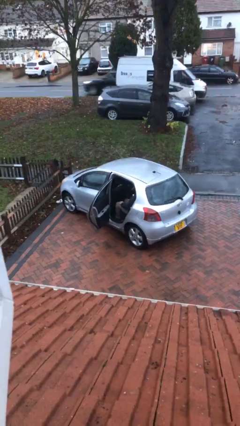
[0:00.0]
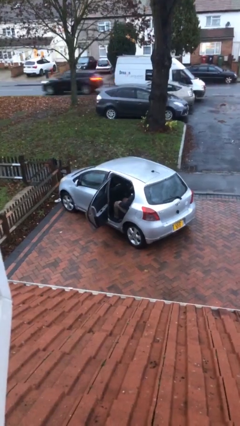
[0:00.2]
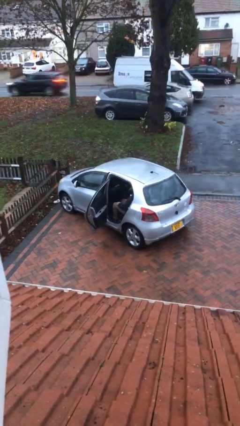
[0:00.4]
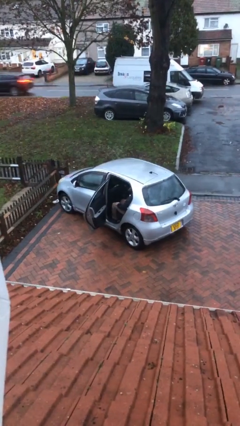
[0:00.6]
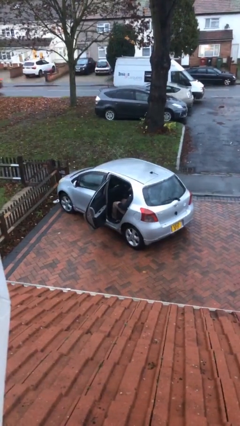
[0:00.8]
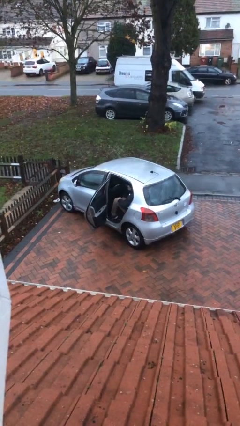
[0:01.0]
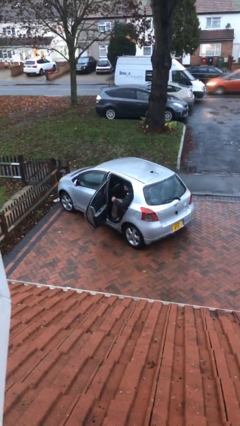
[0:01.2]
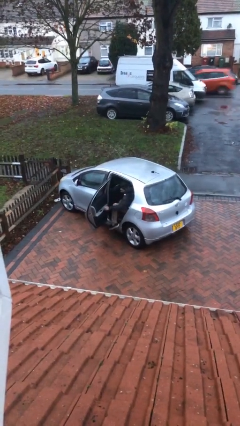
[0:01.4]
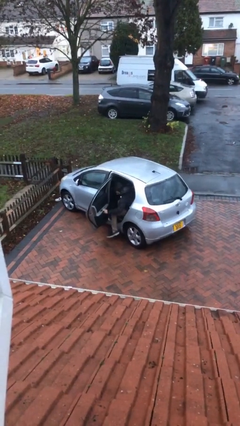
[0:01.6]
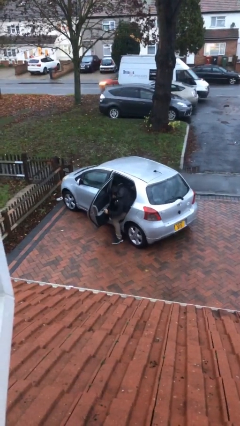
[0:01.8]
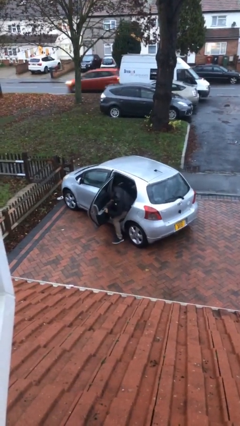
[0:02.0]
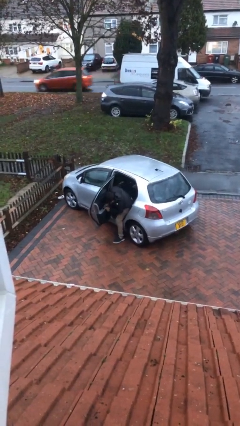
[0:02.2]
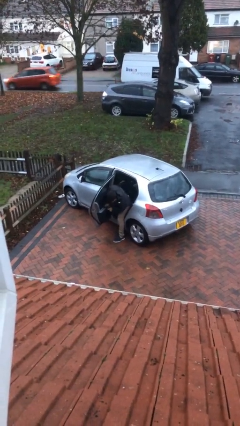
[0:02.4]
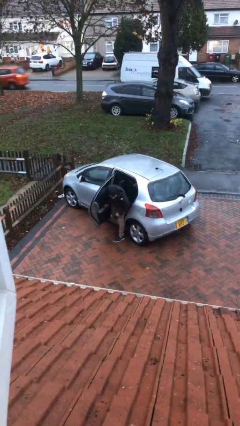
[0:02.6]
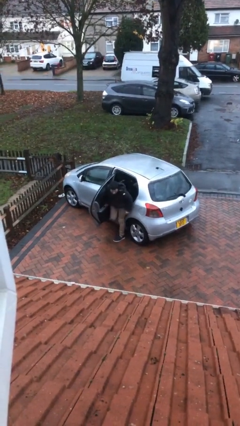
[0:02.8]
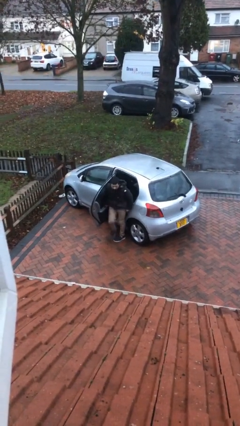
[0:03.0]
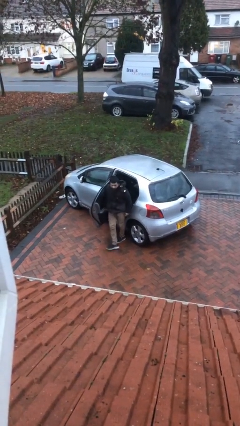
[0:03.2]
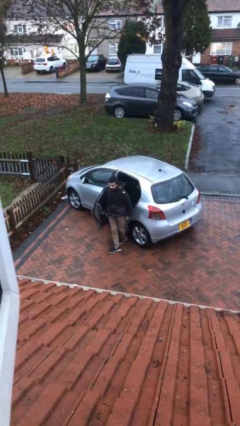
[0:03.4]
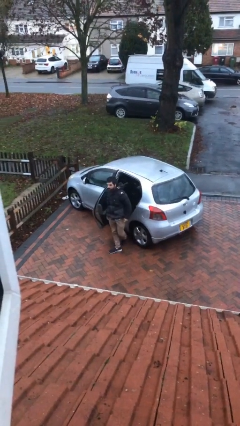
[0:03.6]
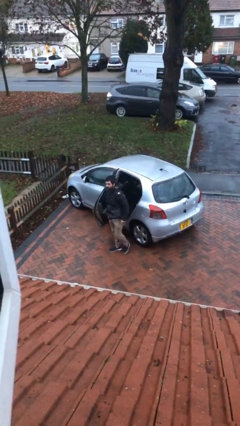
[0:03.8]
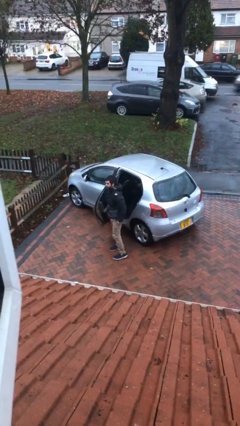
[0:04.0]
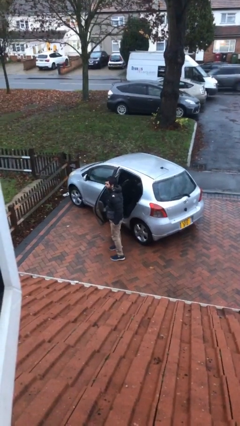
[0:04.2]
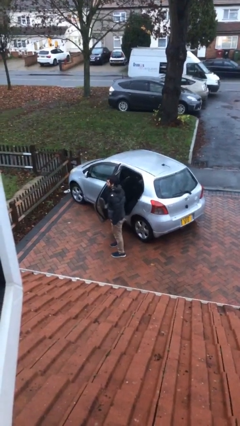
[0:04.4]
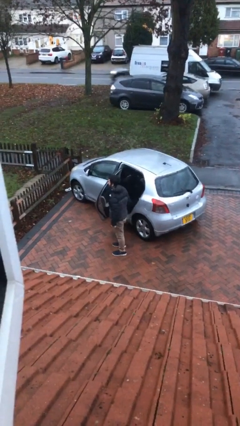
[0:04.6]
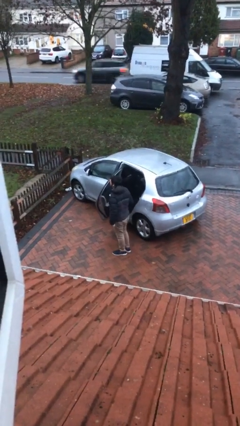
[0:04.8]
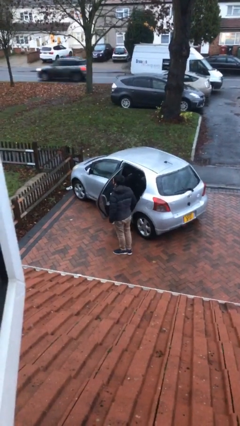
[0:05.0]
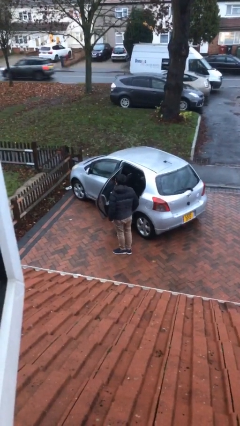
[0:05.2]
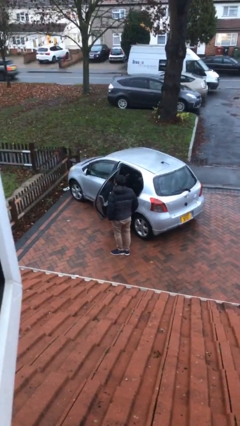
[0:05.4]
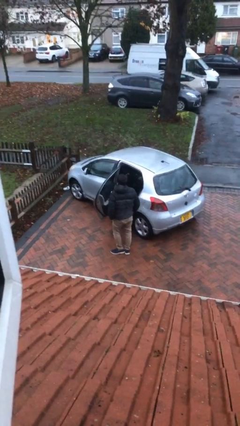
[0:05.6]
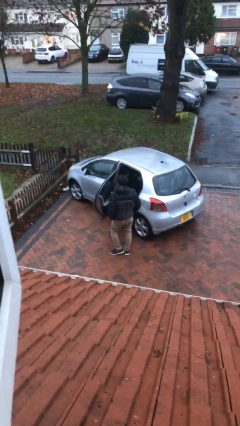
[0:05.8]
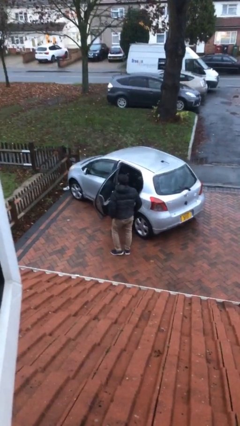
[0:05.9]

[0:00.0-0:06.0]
person exits car

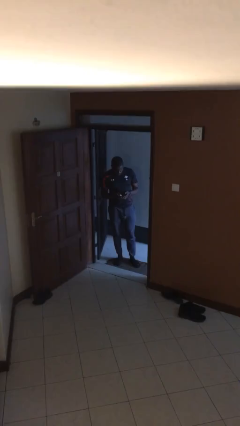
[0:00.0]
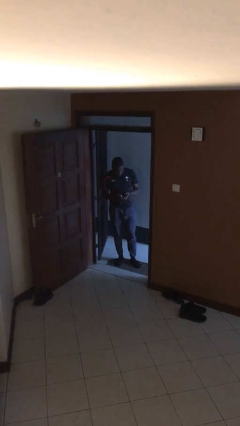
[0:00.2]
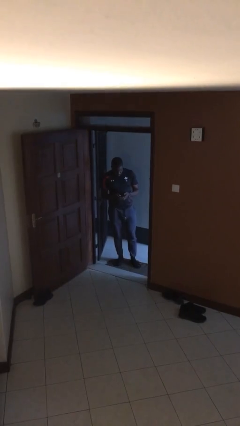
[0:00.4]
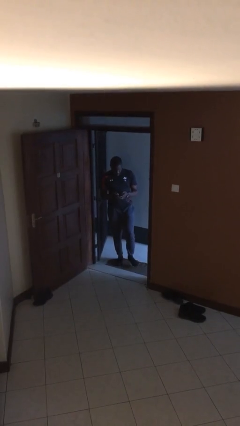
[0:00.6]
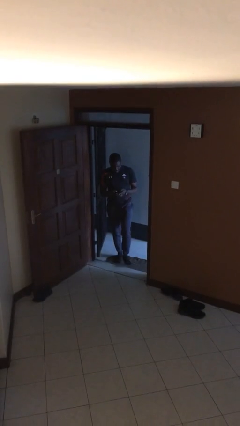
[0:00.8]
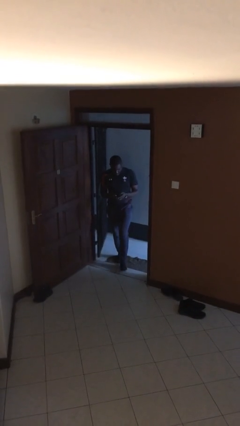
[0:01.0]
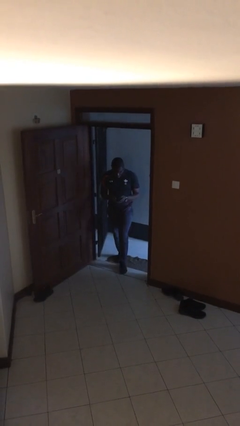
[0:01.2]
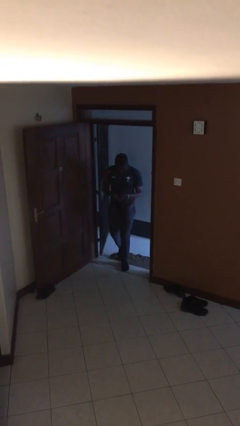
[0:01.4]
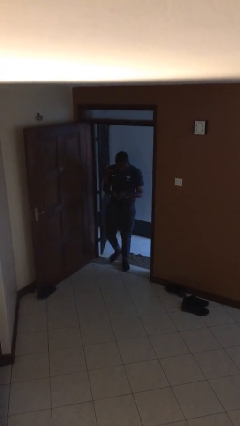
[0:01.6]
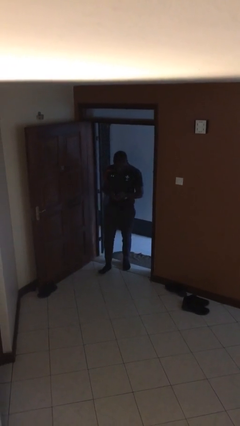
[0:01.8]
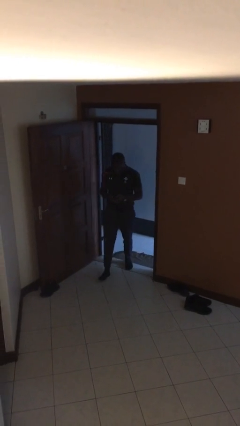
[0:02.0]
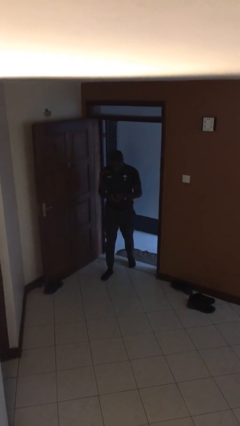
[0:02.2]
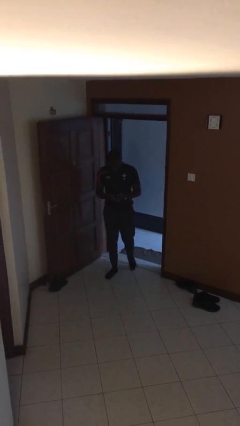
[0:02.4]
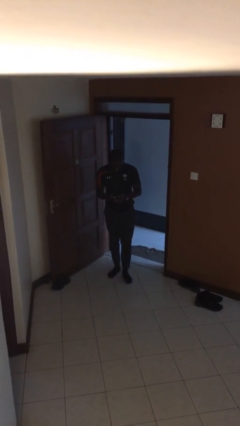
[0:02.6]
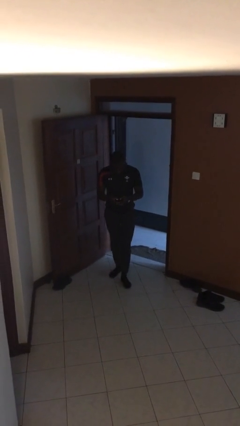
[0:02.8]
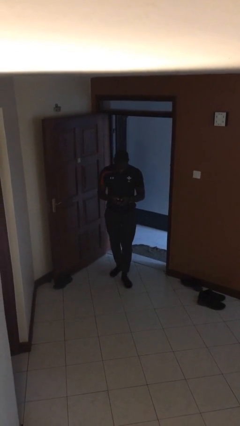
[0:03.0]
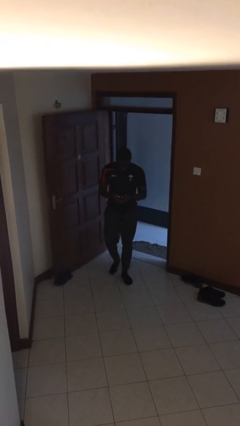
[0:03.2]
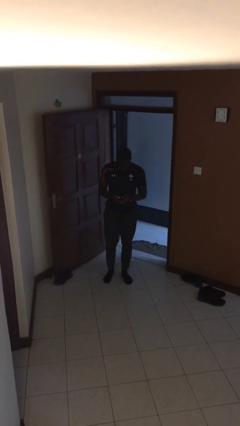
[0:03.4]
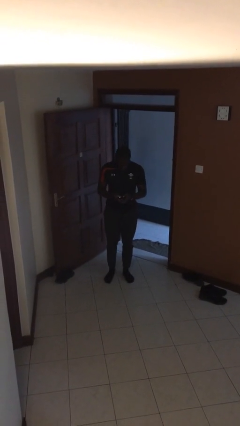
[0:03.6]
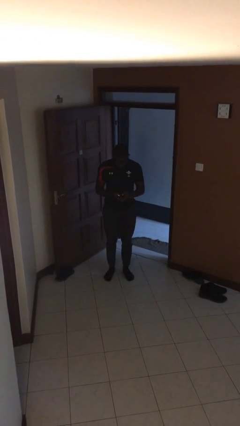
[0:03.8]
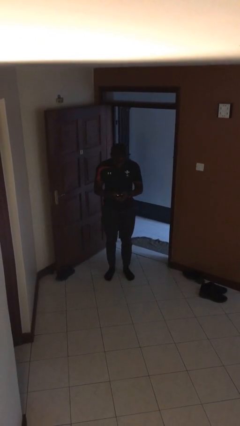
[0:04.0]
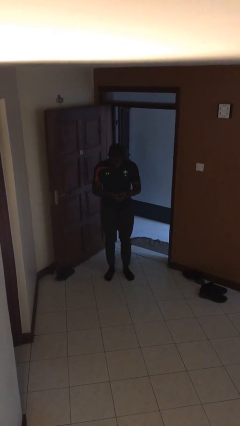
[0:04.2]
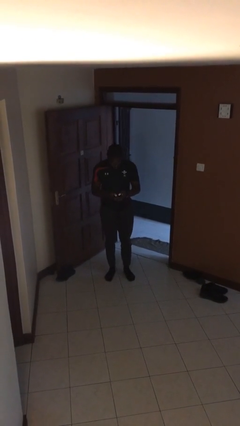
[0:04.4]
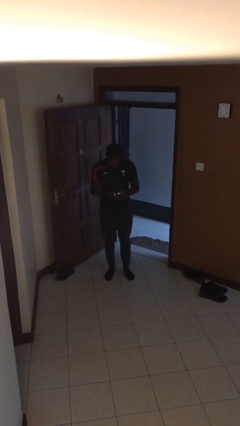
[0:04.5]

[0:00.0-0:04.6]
person enters scene through structure

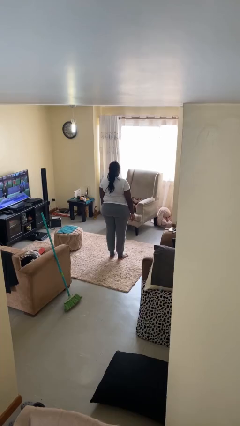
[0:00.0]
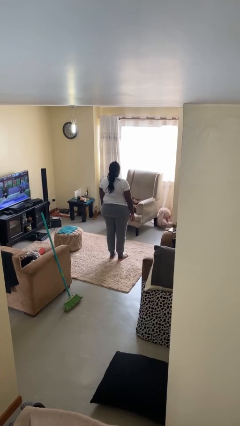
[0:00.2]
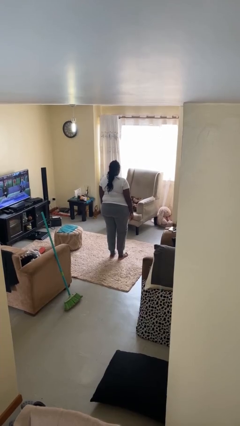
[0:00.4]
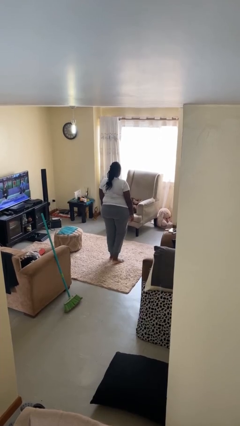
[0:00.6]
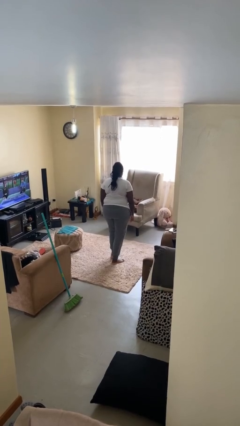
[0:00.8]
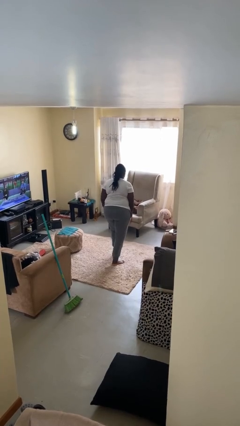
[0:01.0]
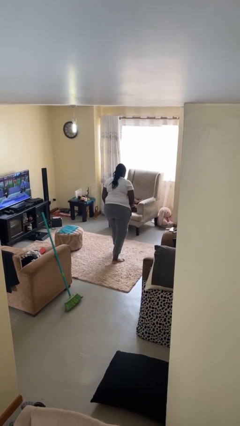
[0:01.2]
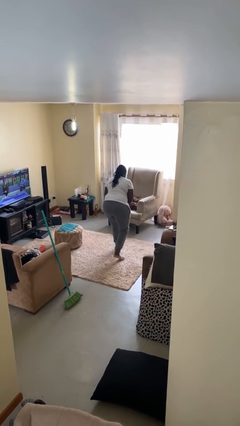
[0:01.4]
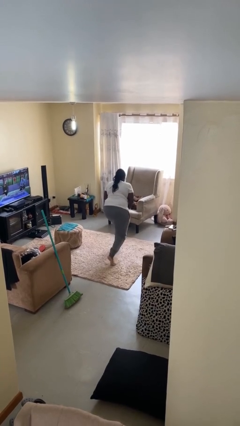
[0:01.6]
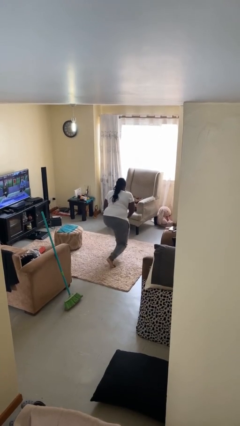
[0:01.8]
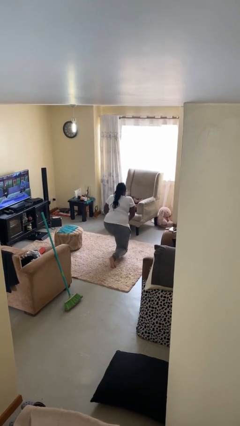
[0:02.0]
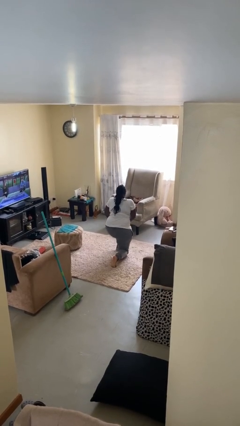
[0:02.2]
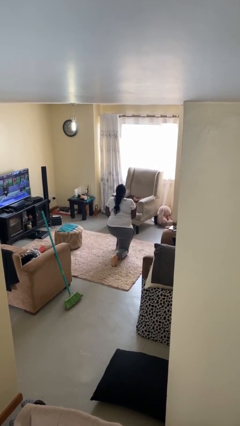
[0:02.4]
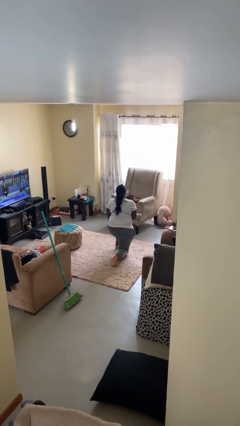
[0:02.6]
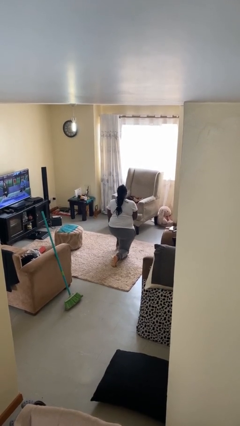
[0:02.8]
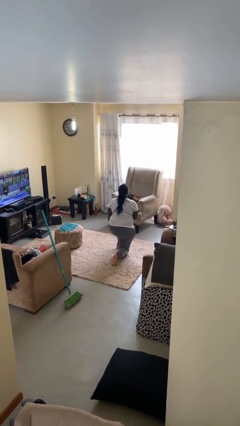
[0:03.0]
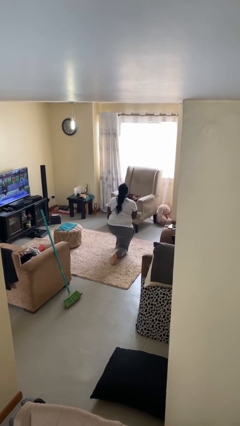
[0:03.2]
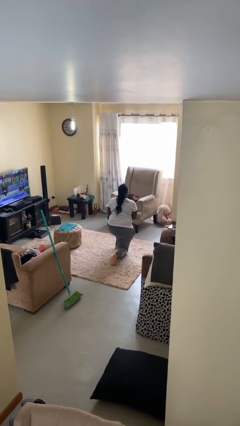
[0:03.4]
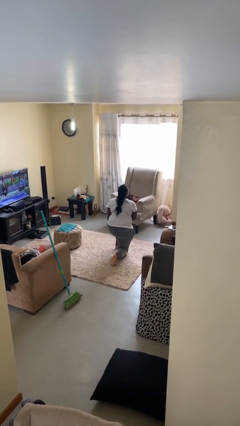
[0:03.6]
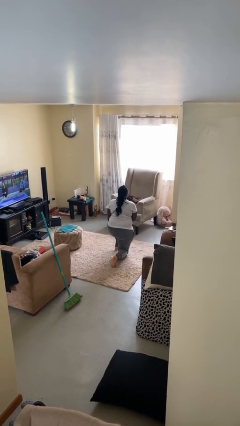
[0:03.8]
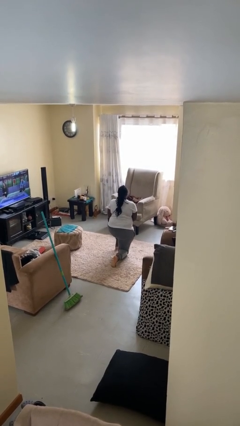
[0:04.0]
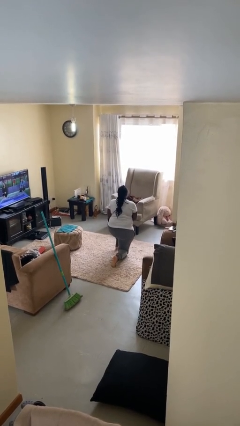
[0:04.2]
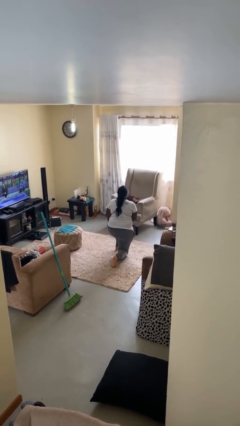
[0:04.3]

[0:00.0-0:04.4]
person kneels

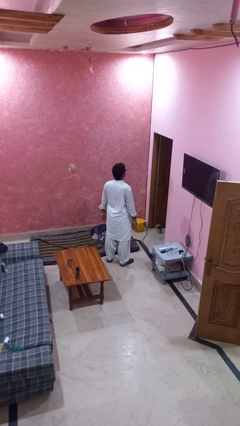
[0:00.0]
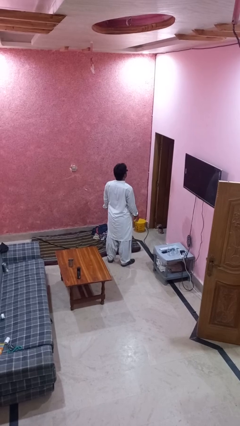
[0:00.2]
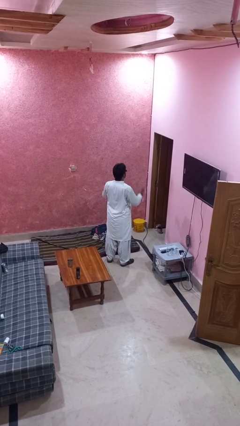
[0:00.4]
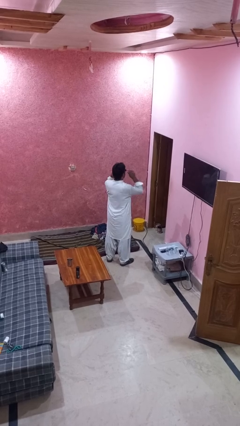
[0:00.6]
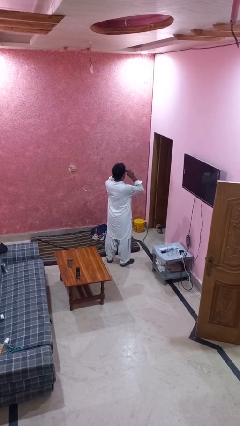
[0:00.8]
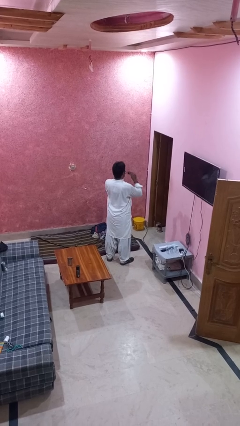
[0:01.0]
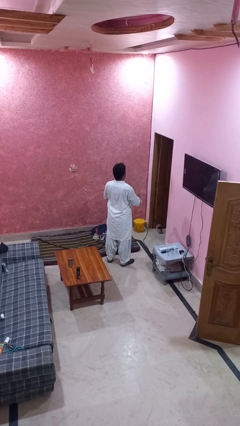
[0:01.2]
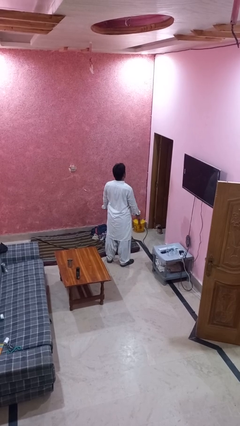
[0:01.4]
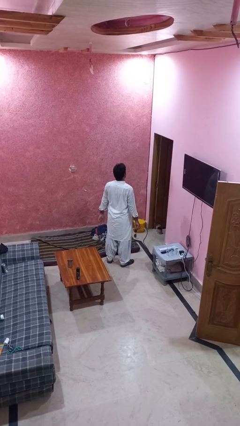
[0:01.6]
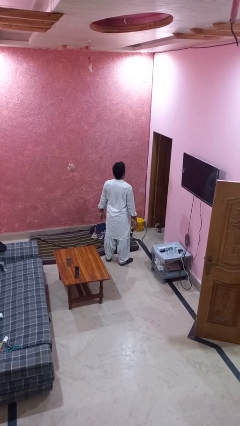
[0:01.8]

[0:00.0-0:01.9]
person takes off sunglasses

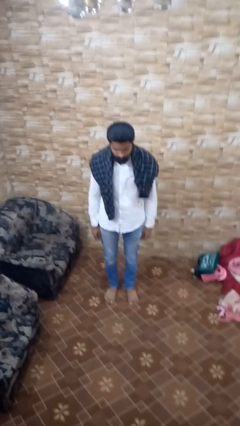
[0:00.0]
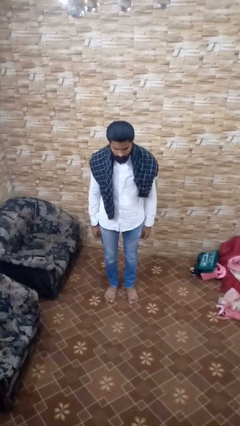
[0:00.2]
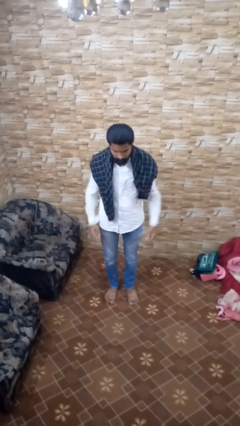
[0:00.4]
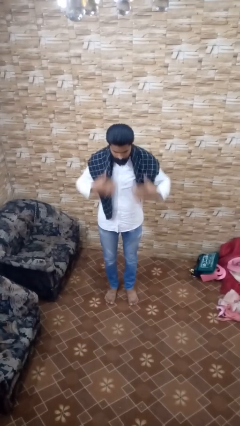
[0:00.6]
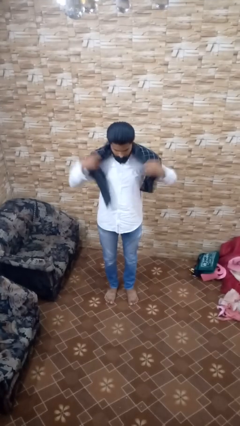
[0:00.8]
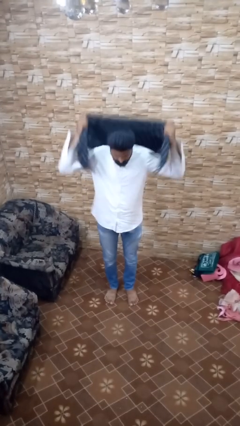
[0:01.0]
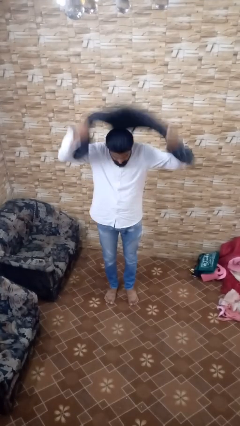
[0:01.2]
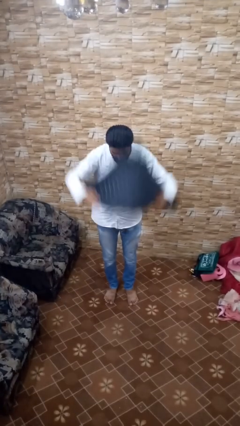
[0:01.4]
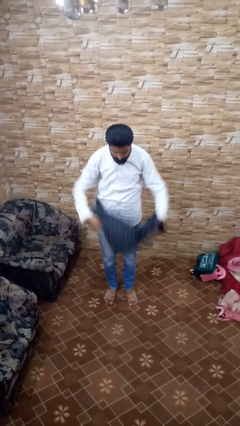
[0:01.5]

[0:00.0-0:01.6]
person takes off scarf
